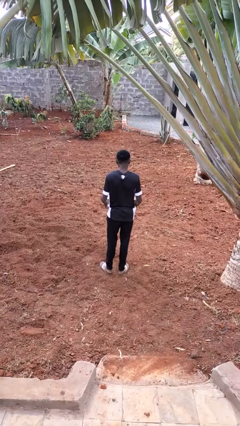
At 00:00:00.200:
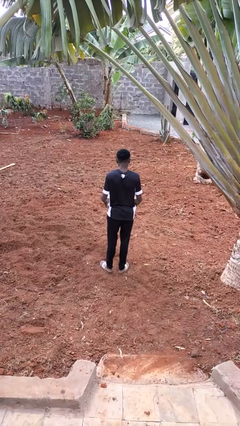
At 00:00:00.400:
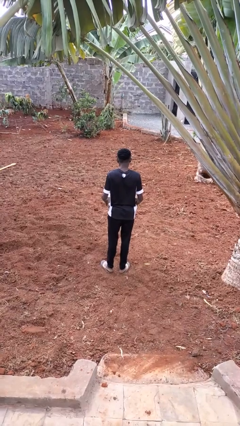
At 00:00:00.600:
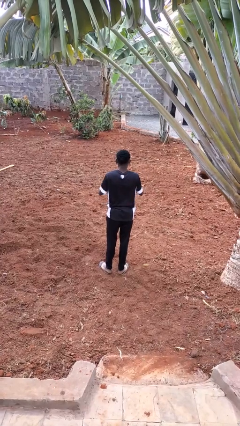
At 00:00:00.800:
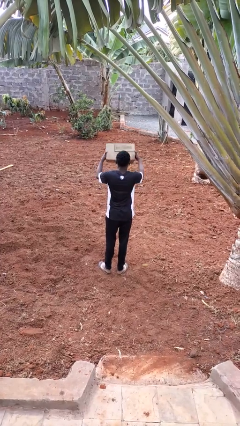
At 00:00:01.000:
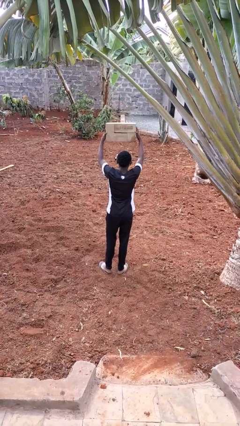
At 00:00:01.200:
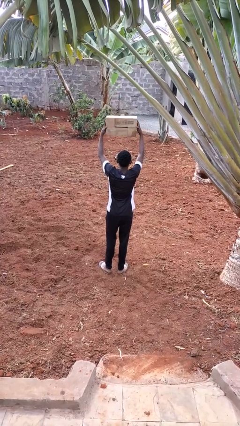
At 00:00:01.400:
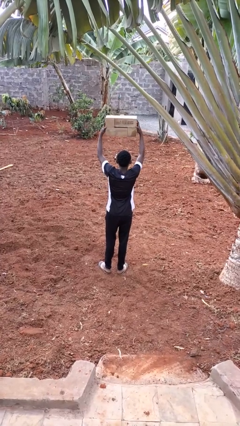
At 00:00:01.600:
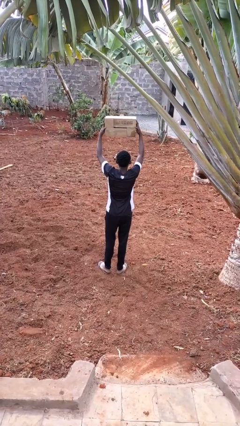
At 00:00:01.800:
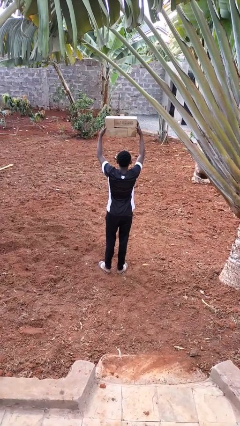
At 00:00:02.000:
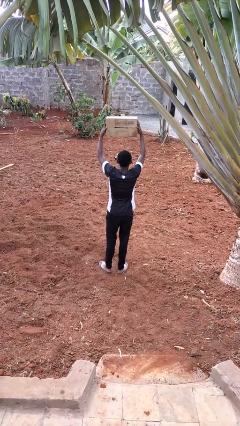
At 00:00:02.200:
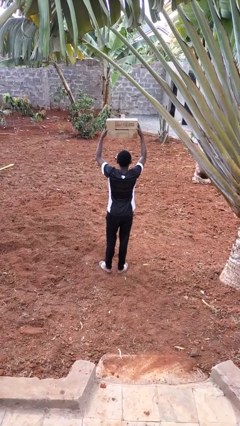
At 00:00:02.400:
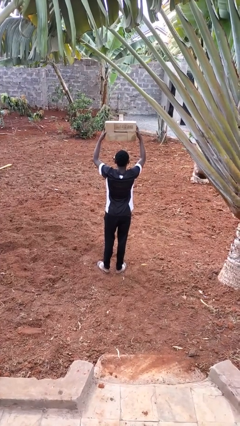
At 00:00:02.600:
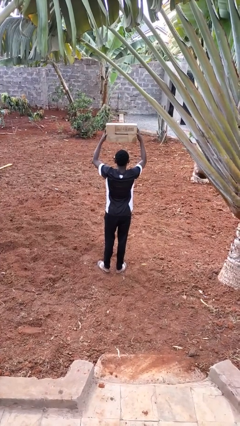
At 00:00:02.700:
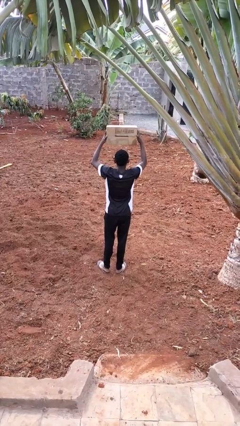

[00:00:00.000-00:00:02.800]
person holds object above head

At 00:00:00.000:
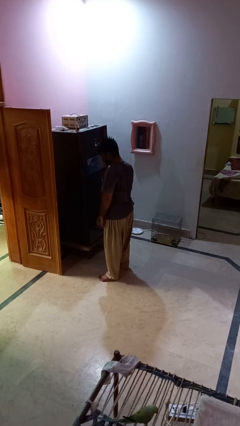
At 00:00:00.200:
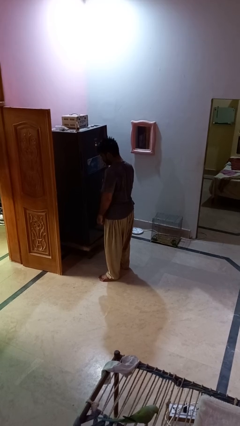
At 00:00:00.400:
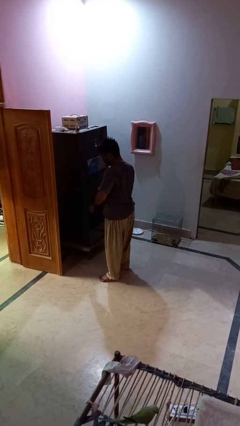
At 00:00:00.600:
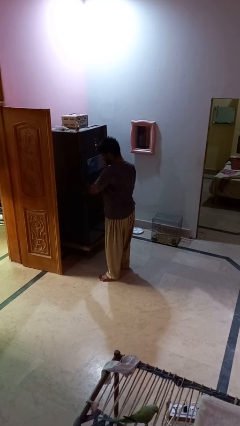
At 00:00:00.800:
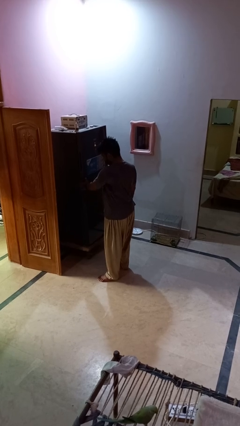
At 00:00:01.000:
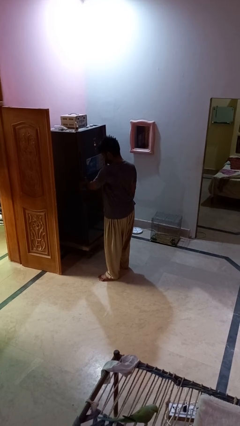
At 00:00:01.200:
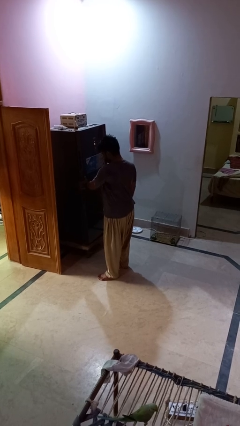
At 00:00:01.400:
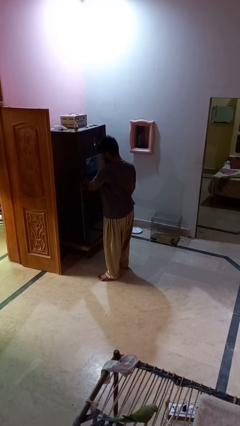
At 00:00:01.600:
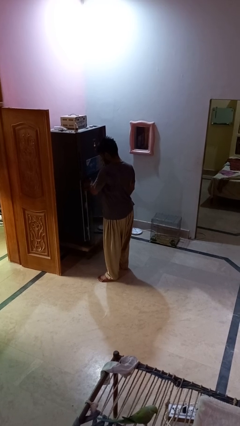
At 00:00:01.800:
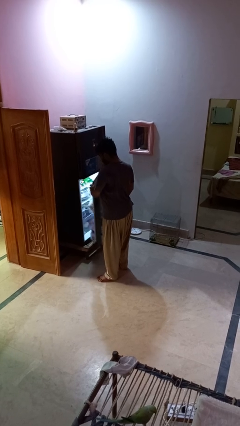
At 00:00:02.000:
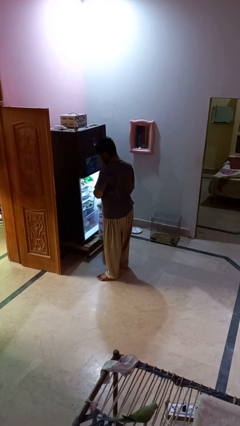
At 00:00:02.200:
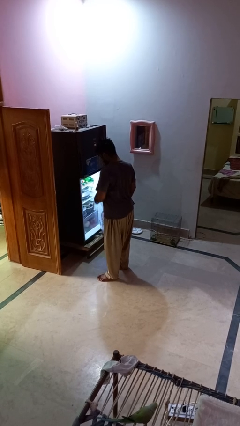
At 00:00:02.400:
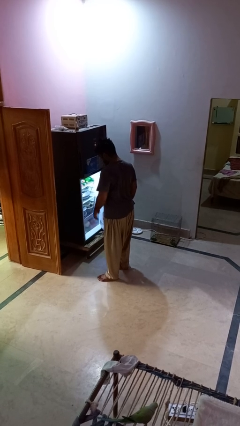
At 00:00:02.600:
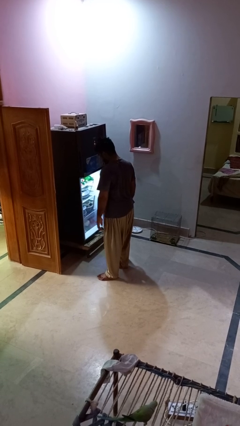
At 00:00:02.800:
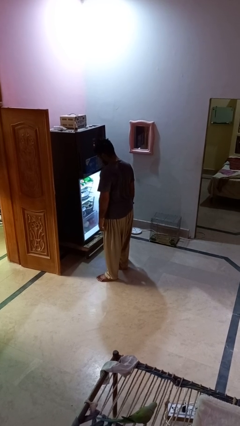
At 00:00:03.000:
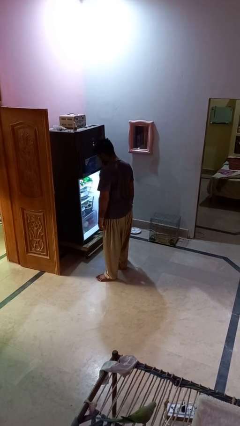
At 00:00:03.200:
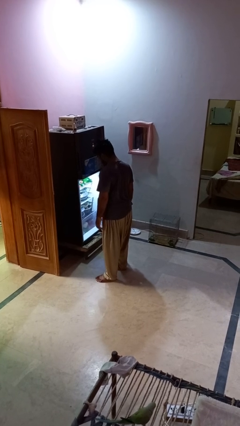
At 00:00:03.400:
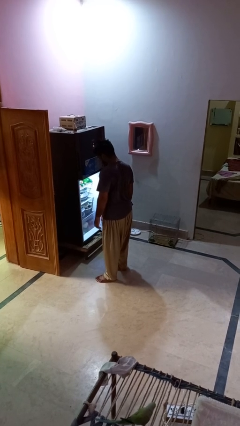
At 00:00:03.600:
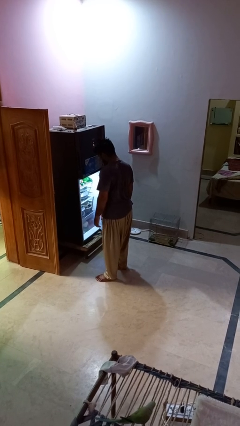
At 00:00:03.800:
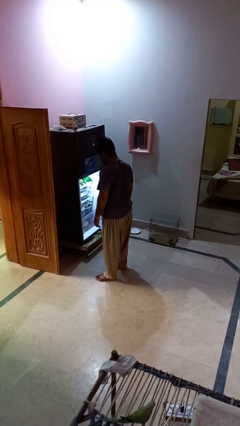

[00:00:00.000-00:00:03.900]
person opens refrigerator

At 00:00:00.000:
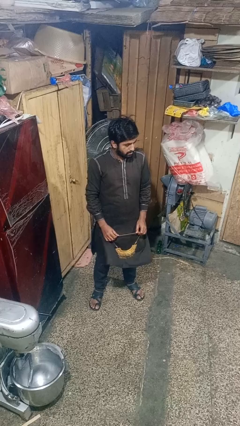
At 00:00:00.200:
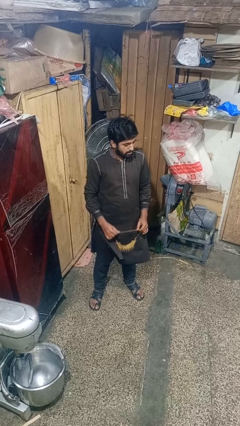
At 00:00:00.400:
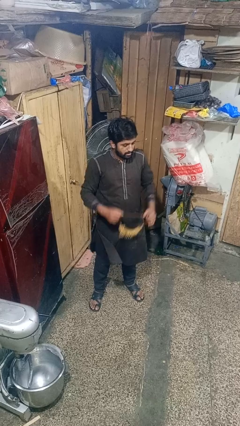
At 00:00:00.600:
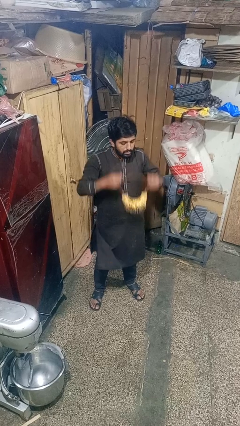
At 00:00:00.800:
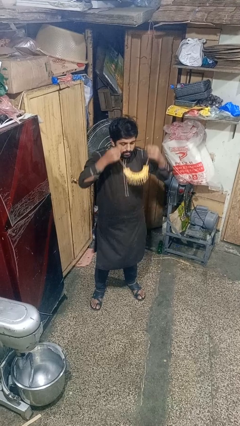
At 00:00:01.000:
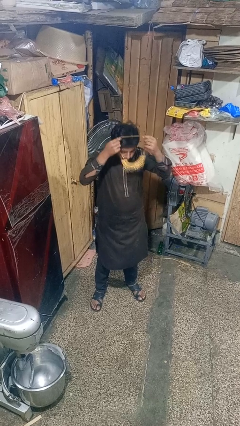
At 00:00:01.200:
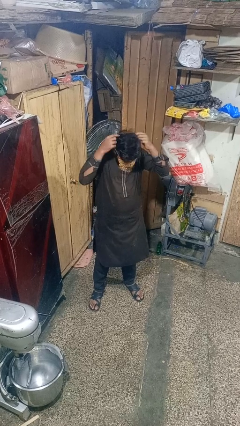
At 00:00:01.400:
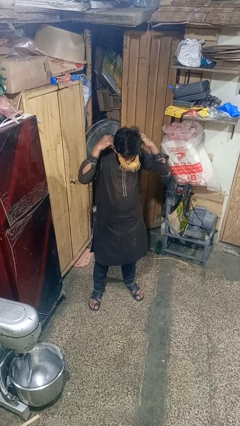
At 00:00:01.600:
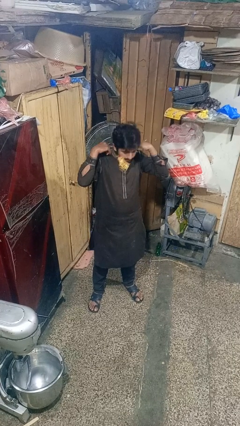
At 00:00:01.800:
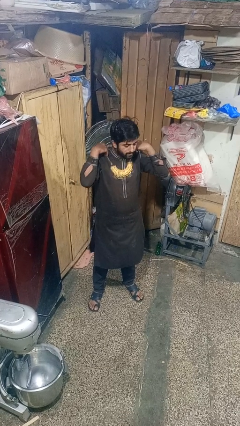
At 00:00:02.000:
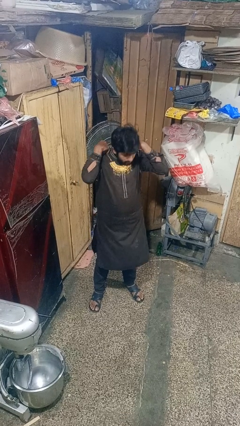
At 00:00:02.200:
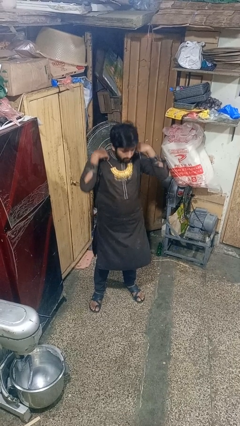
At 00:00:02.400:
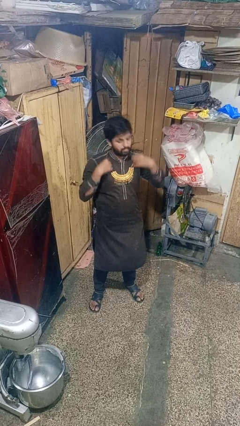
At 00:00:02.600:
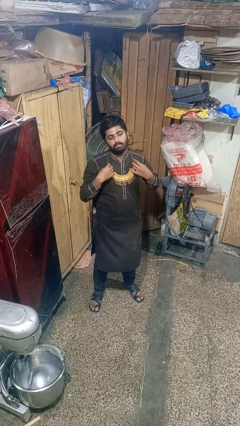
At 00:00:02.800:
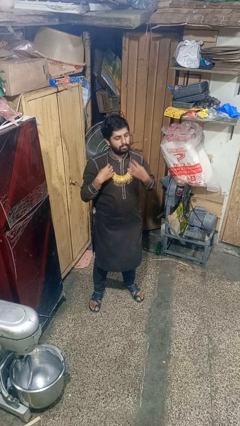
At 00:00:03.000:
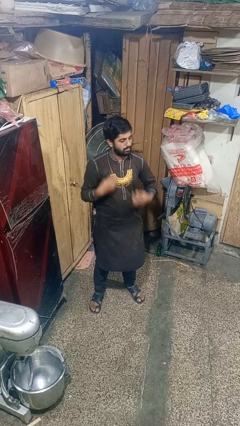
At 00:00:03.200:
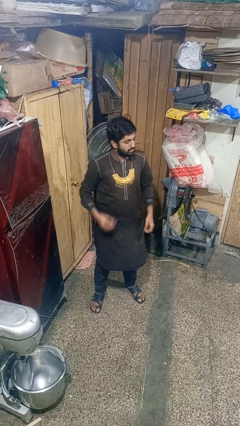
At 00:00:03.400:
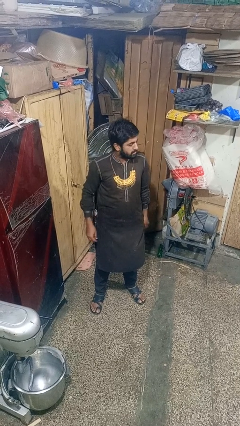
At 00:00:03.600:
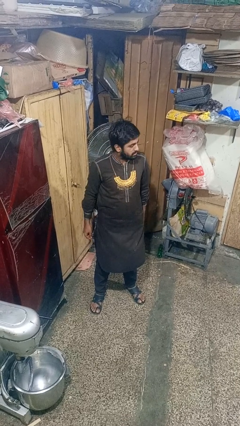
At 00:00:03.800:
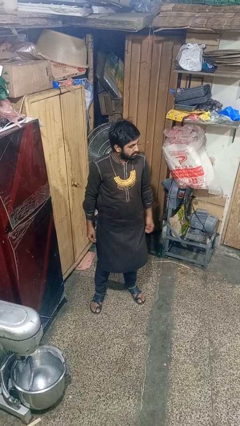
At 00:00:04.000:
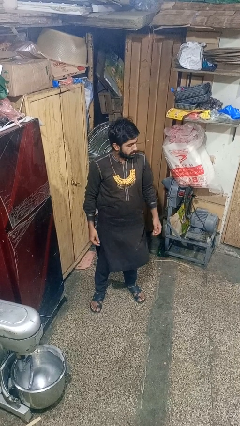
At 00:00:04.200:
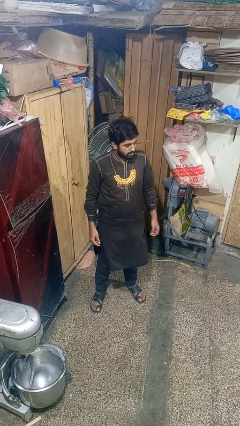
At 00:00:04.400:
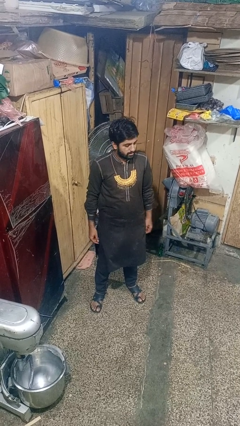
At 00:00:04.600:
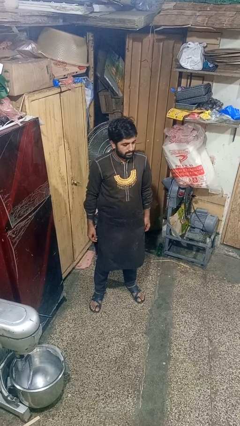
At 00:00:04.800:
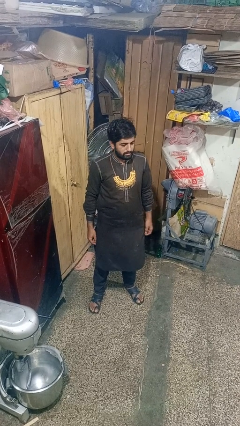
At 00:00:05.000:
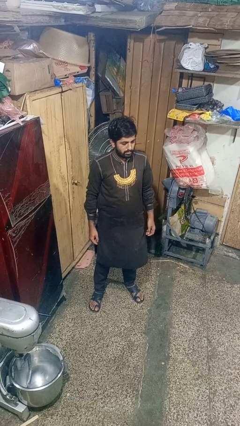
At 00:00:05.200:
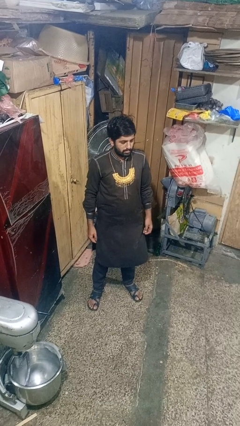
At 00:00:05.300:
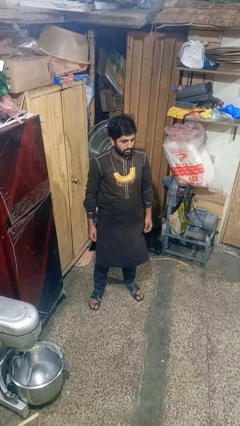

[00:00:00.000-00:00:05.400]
person puts on necklace

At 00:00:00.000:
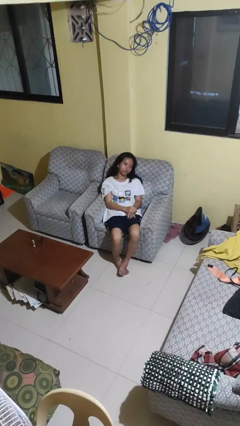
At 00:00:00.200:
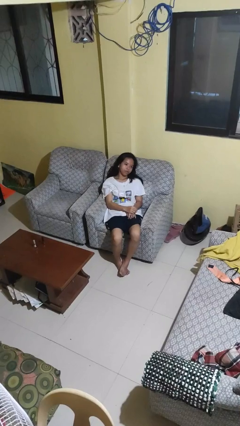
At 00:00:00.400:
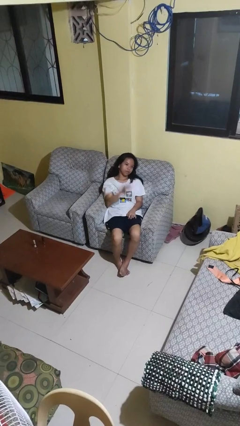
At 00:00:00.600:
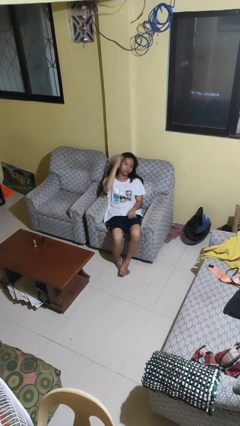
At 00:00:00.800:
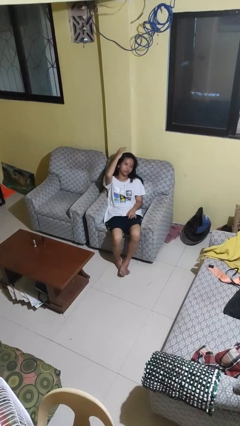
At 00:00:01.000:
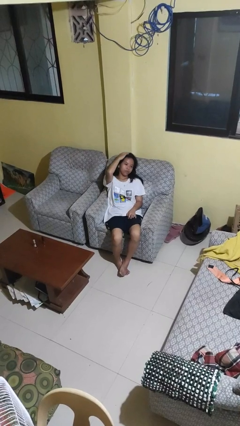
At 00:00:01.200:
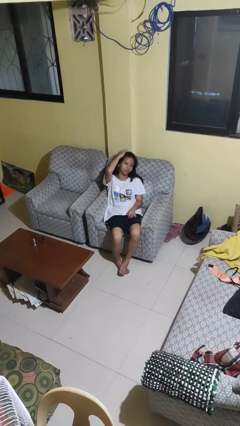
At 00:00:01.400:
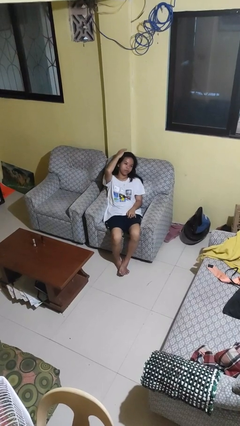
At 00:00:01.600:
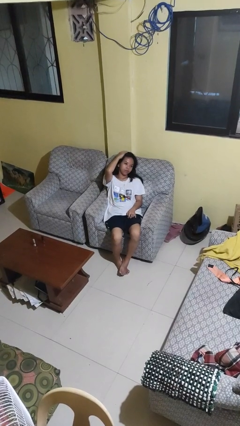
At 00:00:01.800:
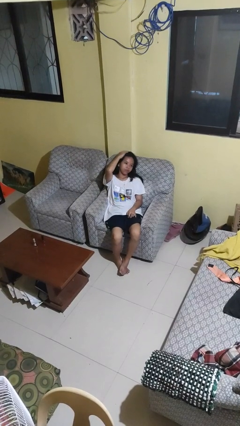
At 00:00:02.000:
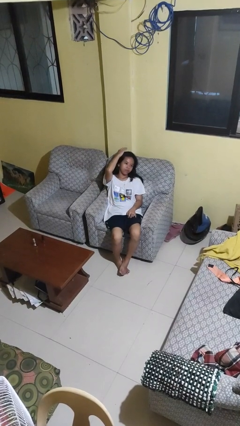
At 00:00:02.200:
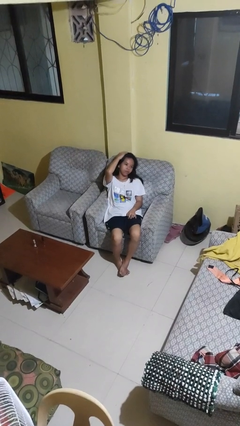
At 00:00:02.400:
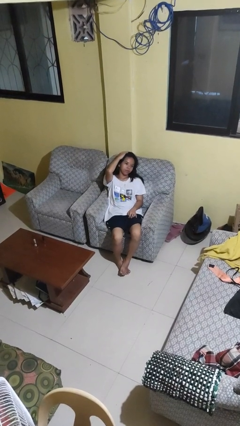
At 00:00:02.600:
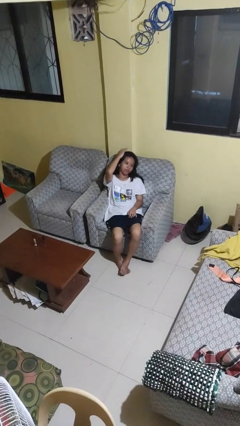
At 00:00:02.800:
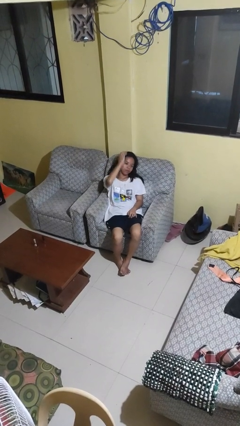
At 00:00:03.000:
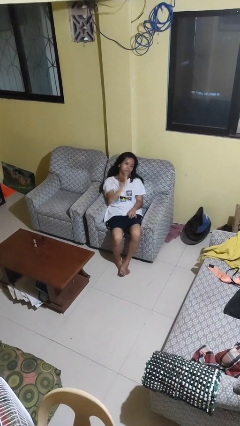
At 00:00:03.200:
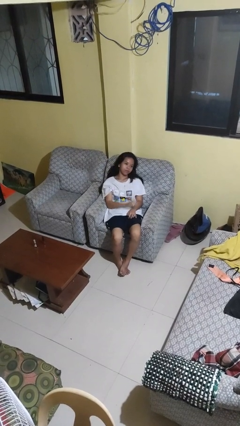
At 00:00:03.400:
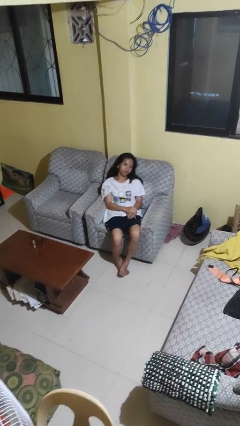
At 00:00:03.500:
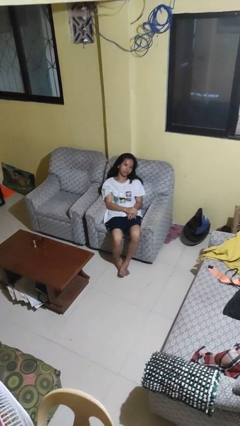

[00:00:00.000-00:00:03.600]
person pats head

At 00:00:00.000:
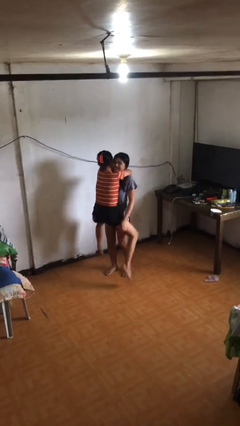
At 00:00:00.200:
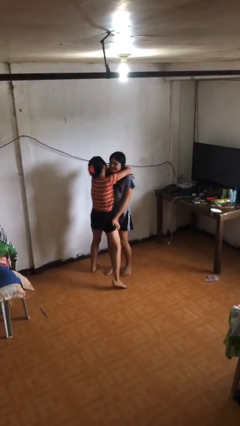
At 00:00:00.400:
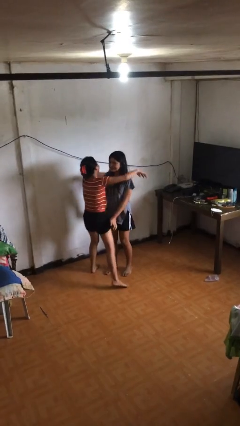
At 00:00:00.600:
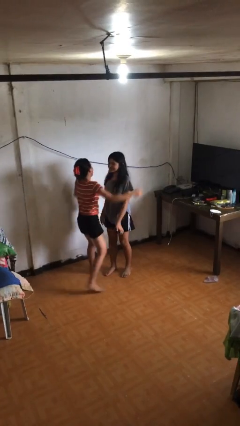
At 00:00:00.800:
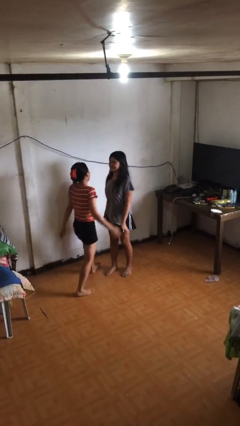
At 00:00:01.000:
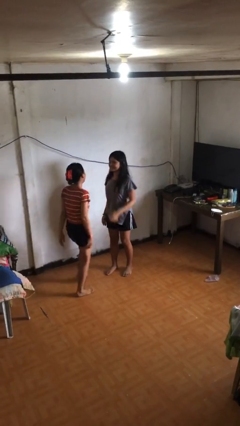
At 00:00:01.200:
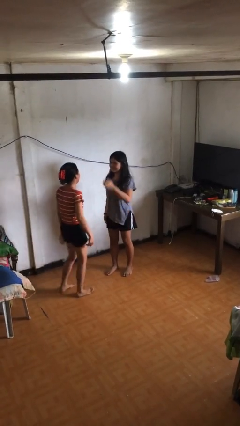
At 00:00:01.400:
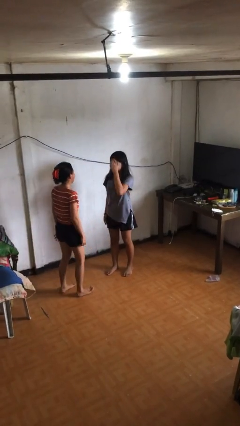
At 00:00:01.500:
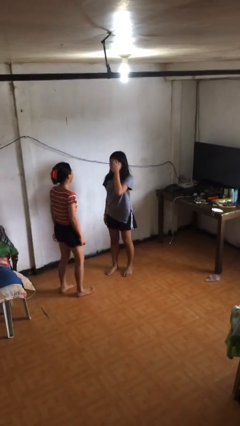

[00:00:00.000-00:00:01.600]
person puts down person
